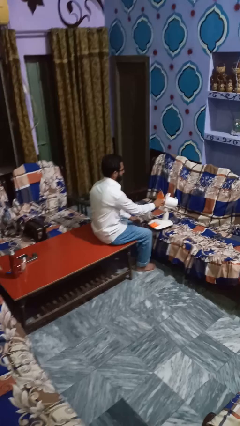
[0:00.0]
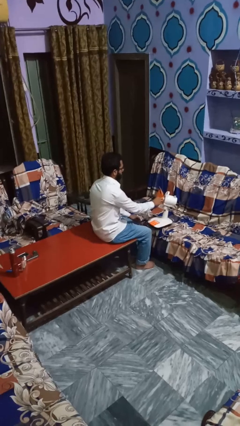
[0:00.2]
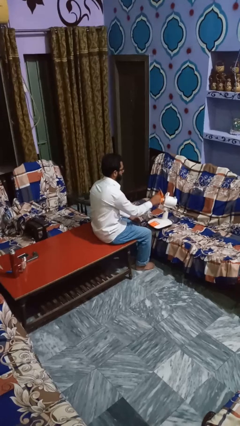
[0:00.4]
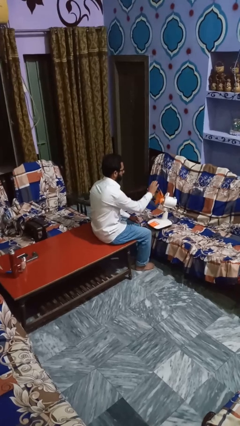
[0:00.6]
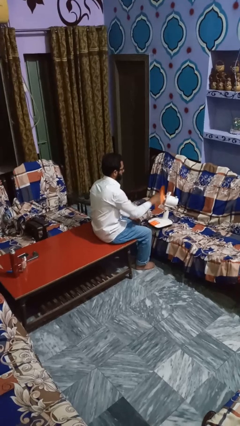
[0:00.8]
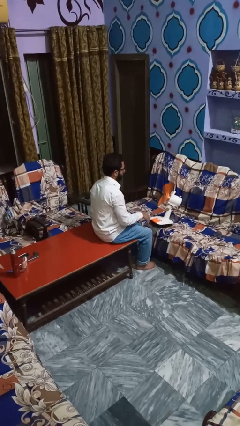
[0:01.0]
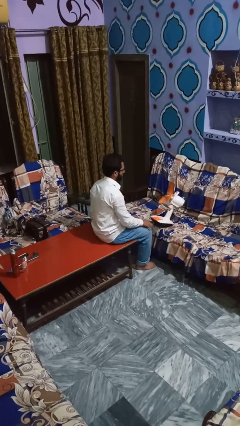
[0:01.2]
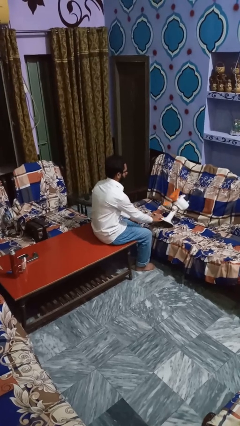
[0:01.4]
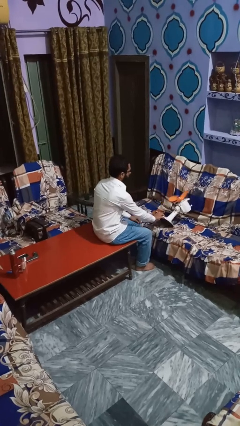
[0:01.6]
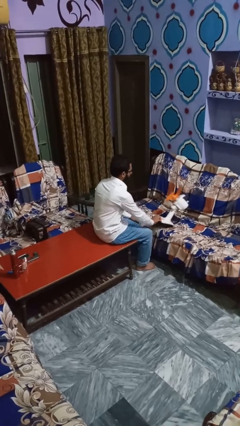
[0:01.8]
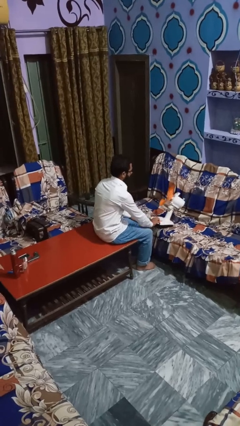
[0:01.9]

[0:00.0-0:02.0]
person turns on fan

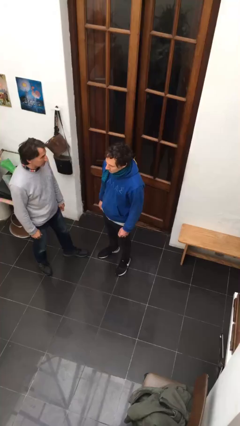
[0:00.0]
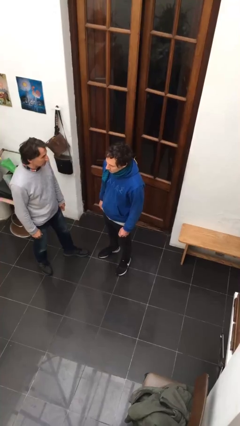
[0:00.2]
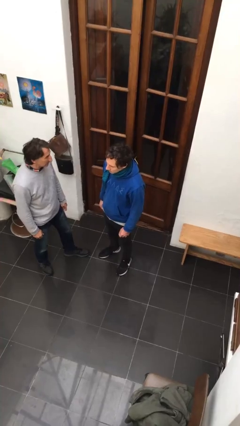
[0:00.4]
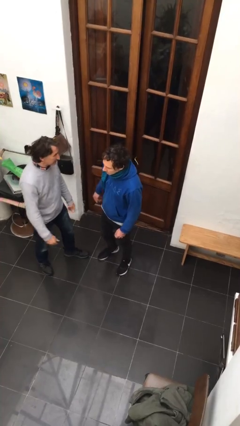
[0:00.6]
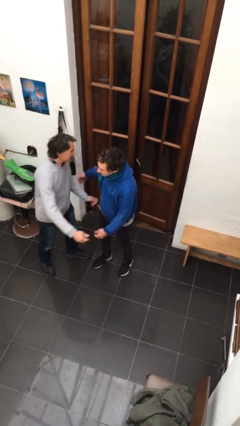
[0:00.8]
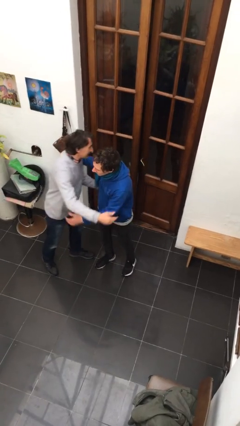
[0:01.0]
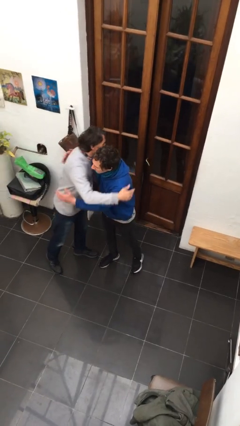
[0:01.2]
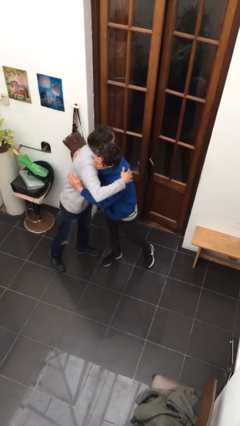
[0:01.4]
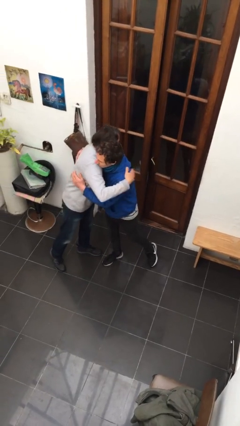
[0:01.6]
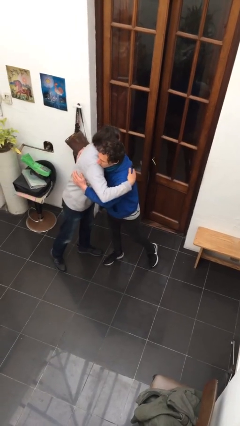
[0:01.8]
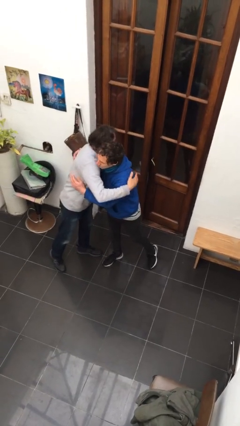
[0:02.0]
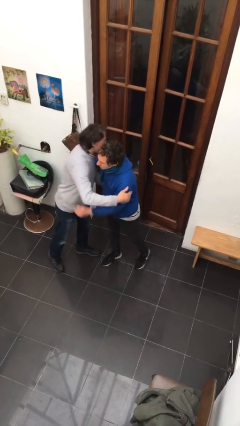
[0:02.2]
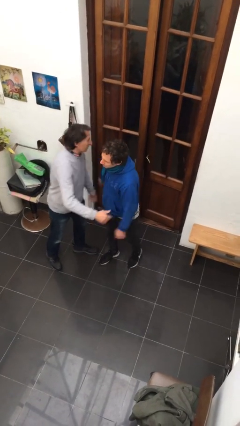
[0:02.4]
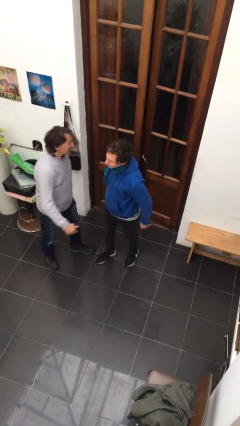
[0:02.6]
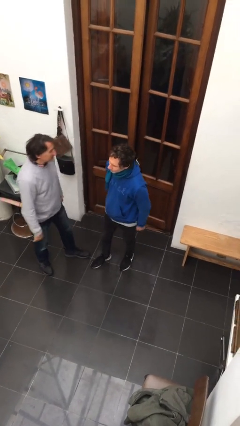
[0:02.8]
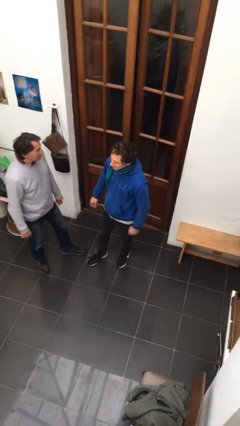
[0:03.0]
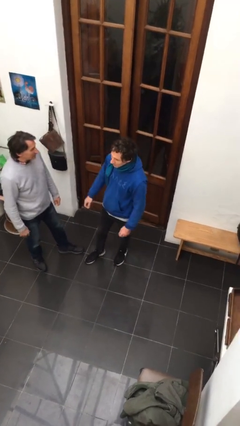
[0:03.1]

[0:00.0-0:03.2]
person embraces person

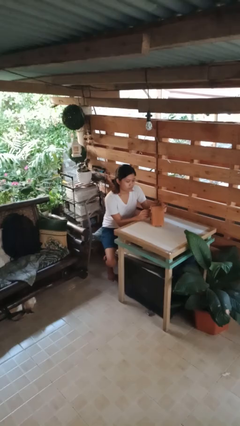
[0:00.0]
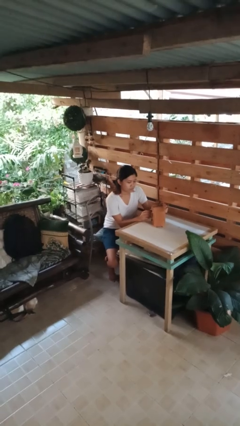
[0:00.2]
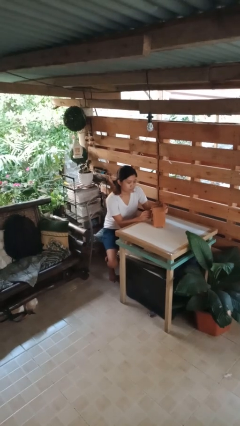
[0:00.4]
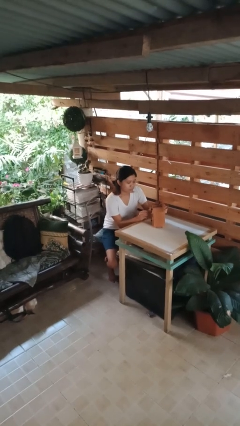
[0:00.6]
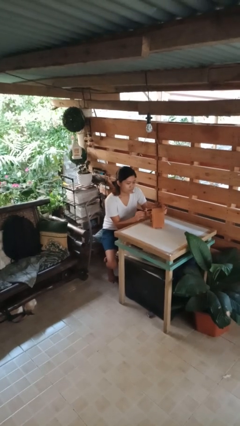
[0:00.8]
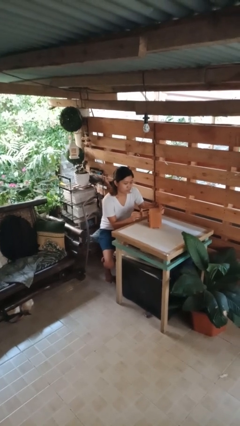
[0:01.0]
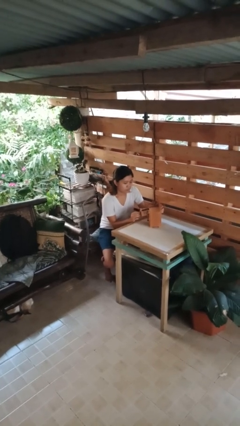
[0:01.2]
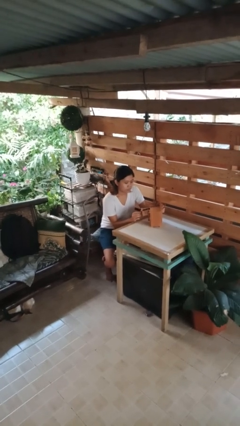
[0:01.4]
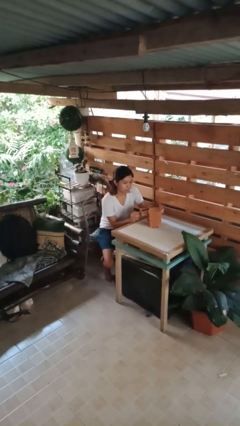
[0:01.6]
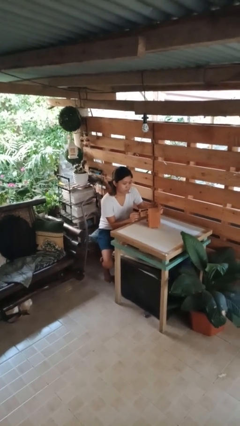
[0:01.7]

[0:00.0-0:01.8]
person opens jewelry box

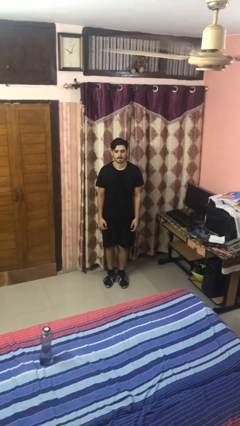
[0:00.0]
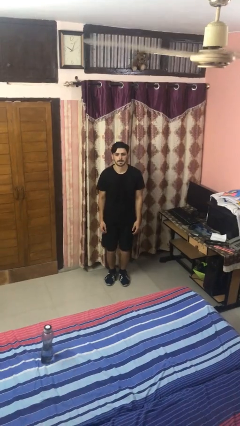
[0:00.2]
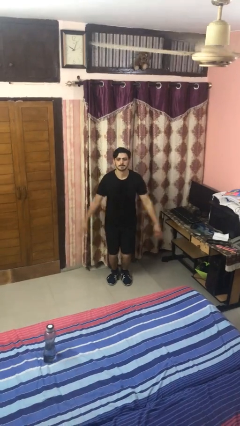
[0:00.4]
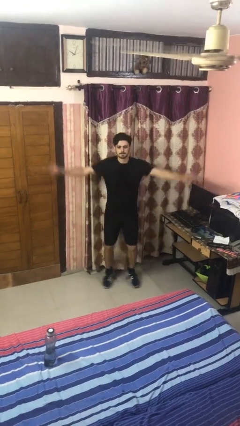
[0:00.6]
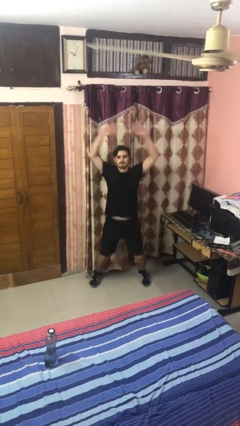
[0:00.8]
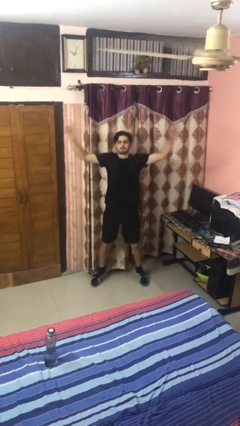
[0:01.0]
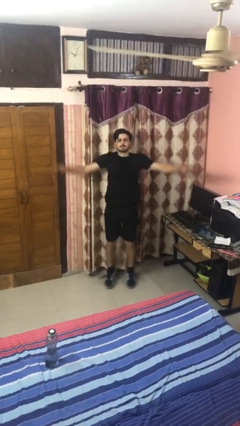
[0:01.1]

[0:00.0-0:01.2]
person exercises with jumping jacks

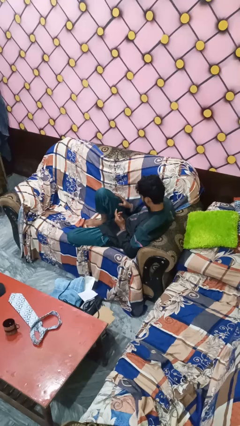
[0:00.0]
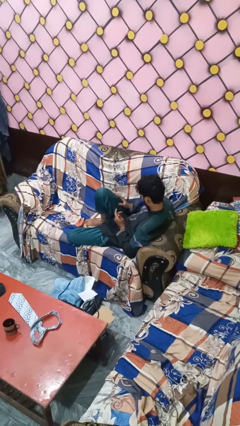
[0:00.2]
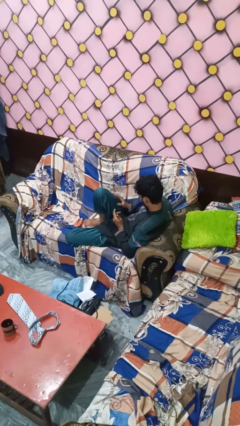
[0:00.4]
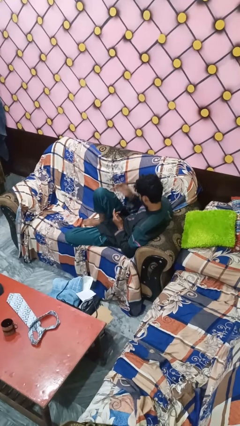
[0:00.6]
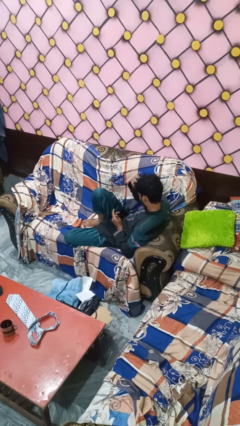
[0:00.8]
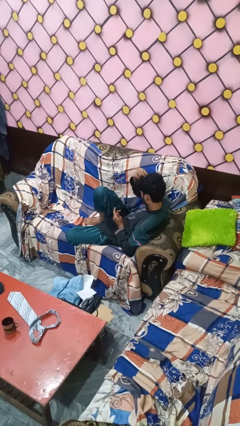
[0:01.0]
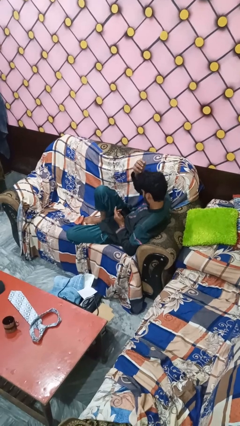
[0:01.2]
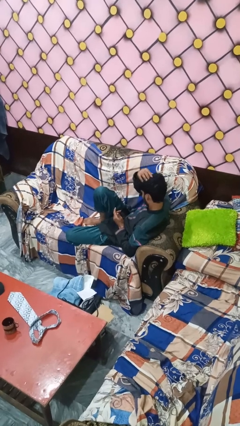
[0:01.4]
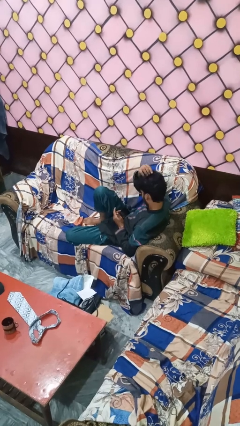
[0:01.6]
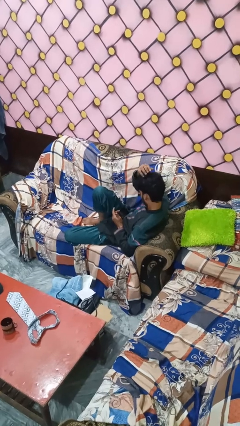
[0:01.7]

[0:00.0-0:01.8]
person strokes hair

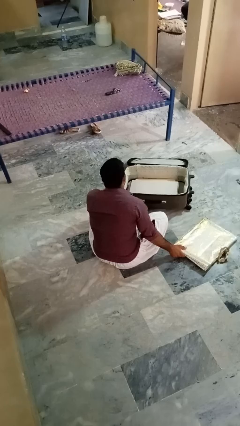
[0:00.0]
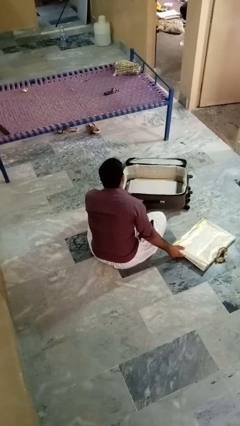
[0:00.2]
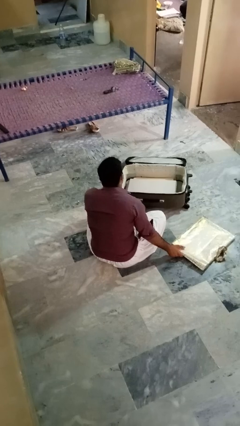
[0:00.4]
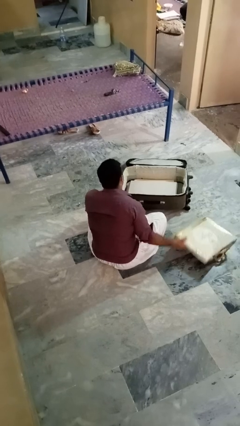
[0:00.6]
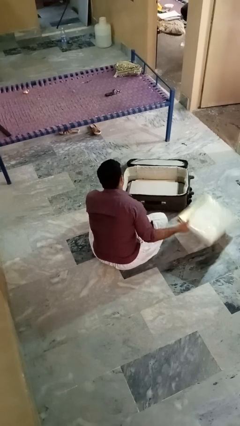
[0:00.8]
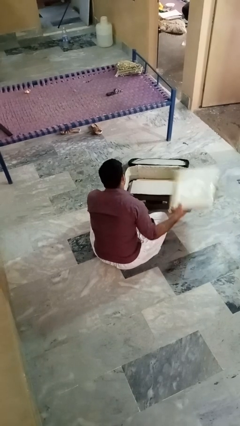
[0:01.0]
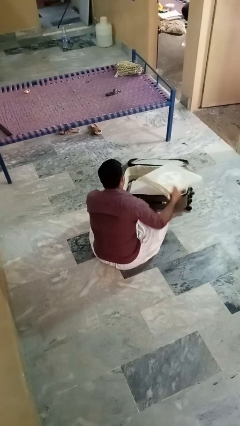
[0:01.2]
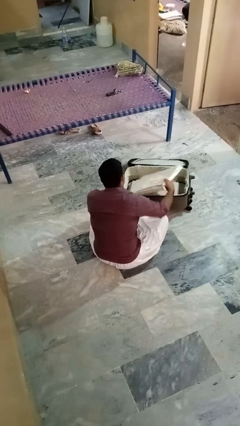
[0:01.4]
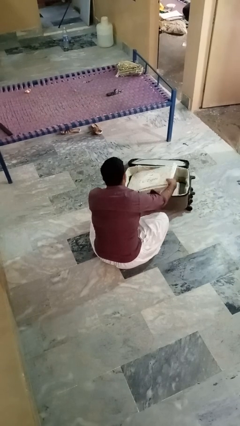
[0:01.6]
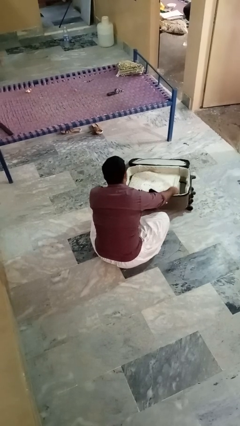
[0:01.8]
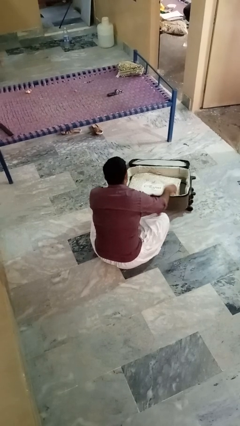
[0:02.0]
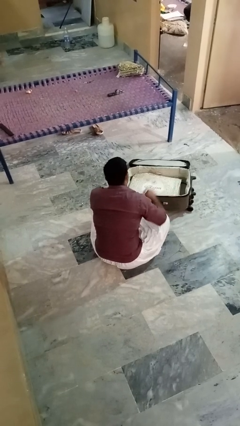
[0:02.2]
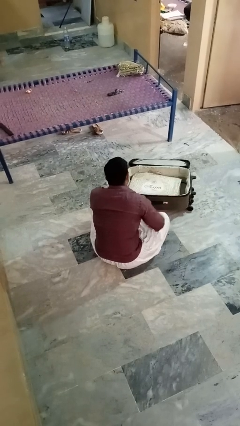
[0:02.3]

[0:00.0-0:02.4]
person puts object into bag

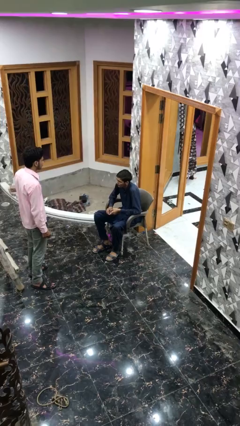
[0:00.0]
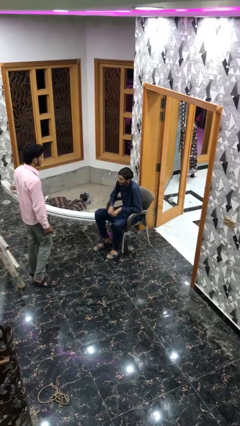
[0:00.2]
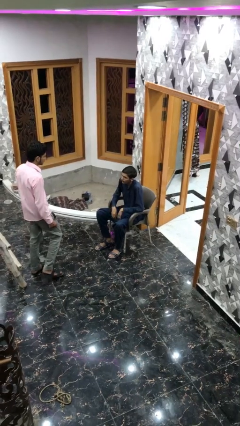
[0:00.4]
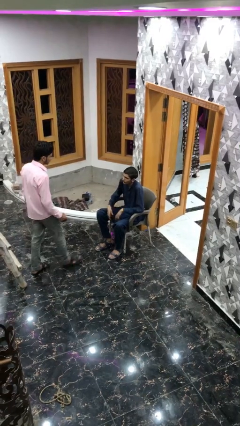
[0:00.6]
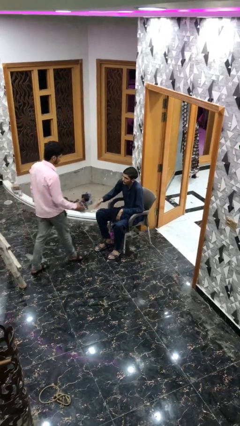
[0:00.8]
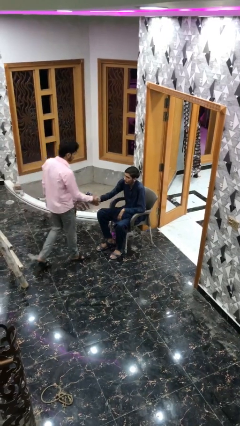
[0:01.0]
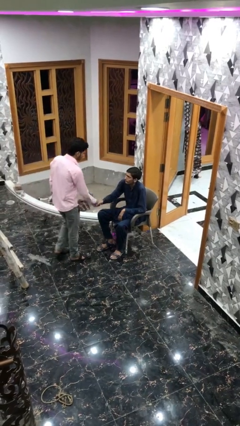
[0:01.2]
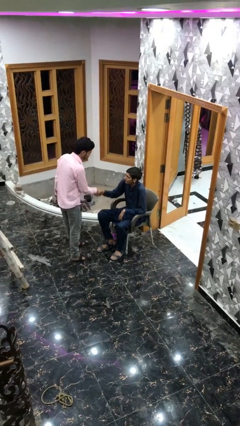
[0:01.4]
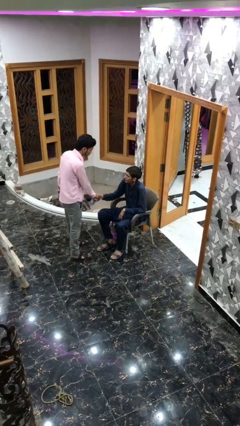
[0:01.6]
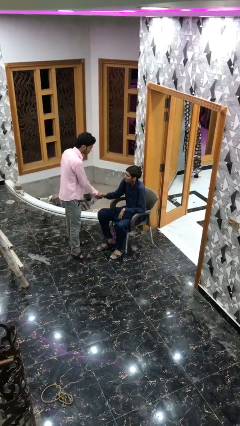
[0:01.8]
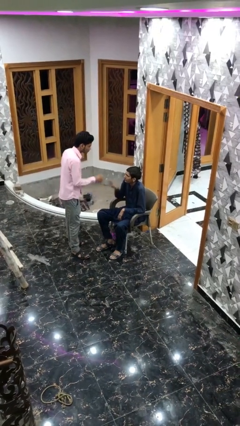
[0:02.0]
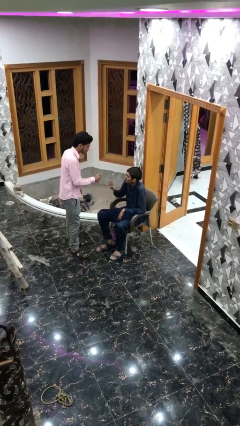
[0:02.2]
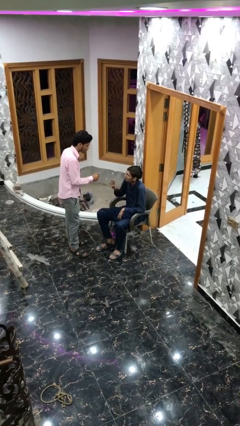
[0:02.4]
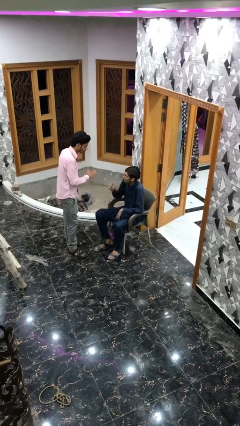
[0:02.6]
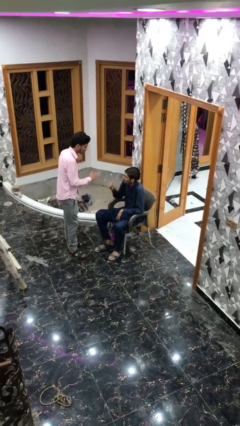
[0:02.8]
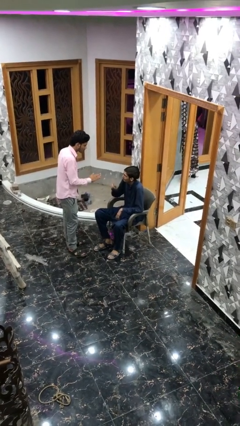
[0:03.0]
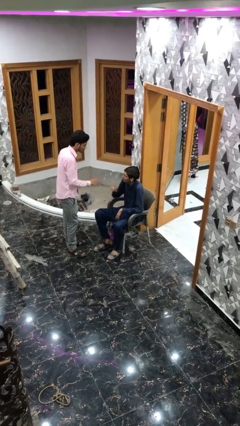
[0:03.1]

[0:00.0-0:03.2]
person shakes hand

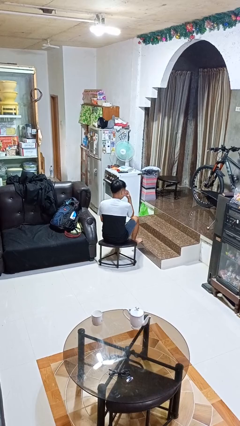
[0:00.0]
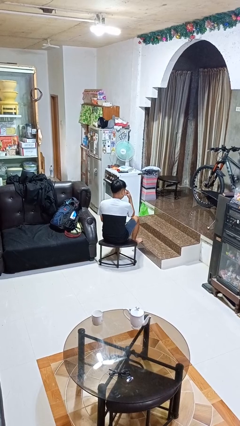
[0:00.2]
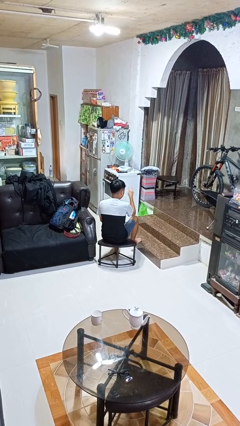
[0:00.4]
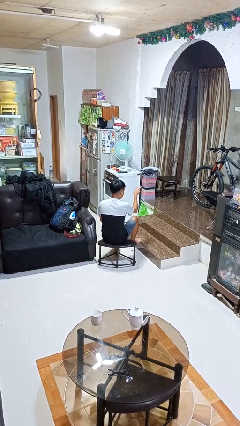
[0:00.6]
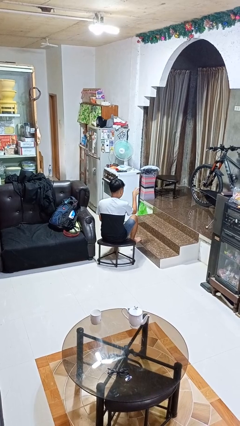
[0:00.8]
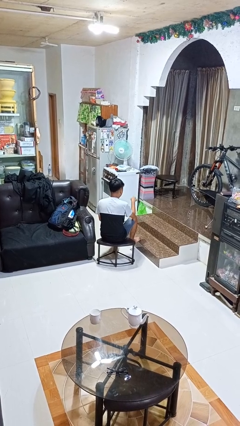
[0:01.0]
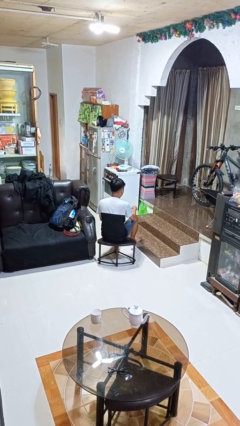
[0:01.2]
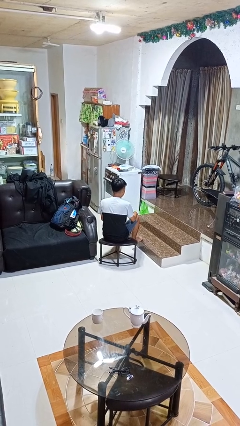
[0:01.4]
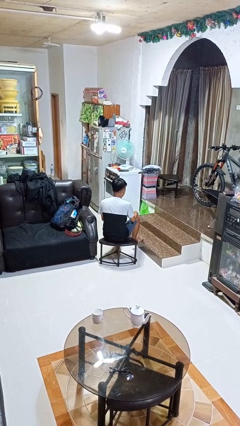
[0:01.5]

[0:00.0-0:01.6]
person gestures watch closely
